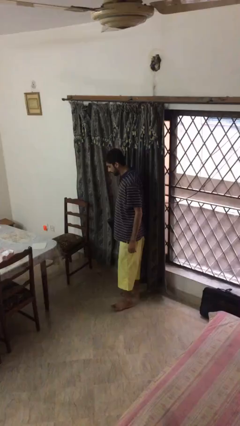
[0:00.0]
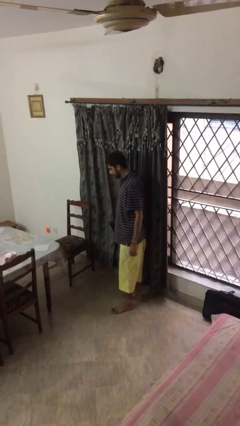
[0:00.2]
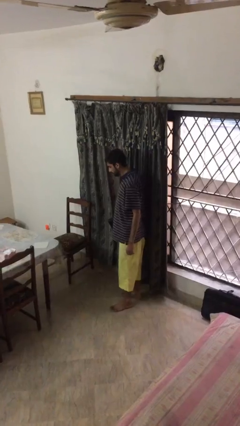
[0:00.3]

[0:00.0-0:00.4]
person sits down

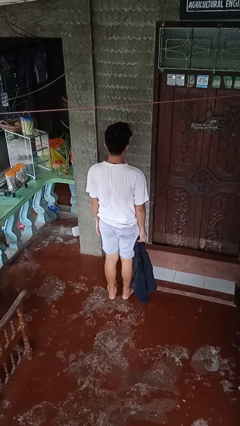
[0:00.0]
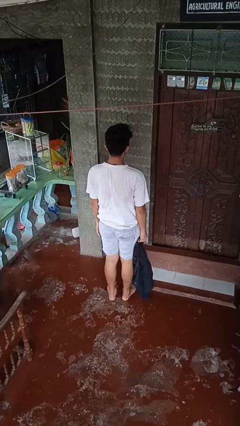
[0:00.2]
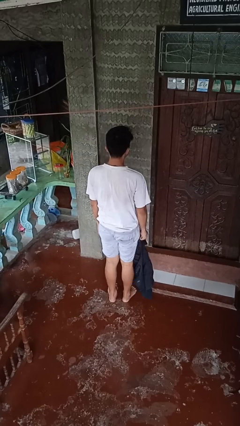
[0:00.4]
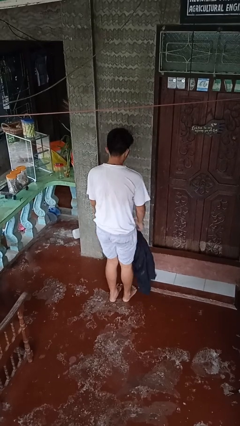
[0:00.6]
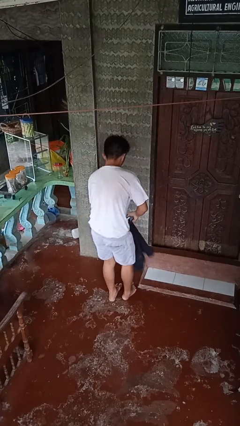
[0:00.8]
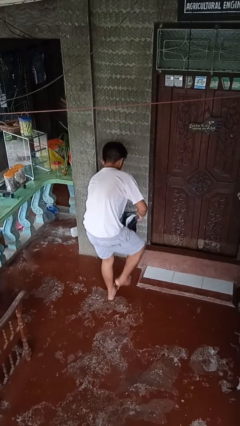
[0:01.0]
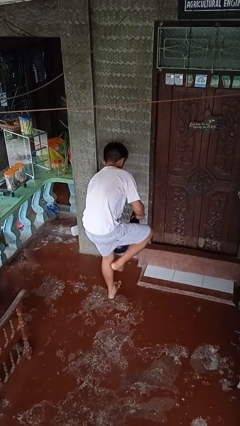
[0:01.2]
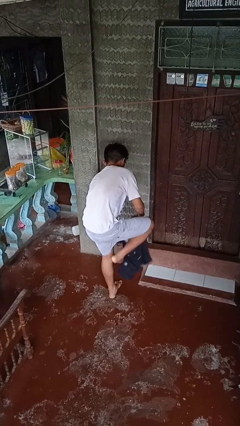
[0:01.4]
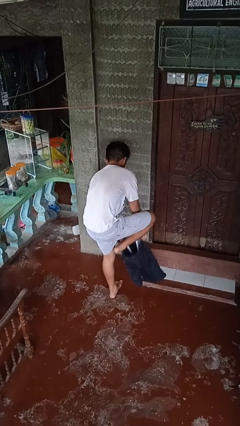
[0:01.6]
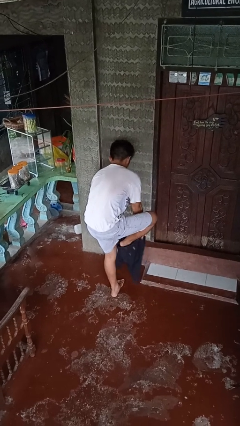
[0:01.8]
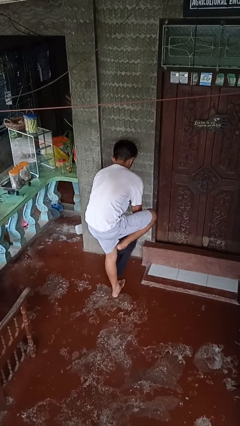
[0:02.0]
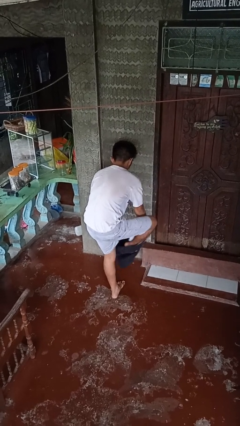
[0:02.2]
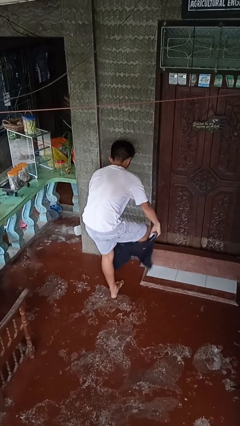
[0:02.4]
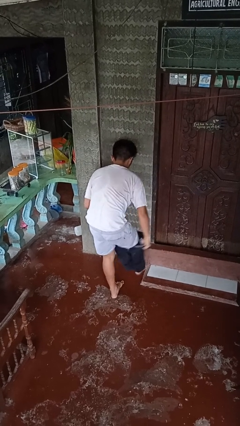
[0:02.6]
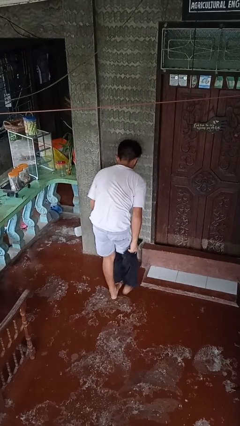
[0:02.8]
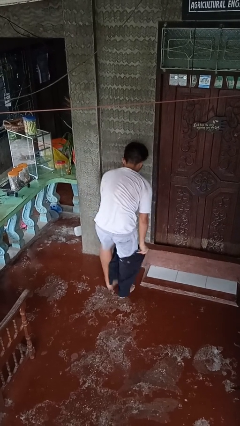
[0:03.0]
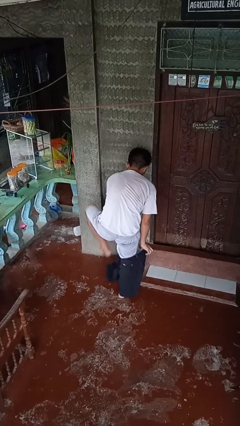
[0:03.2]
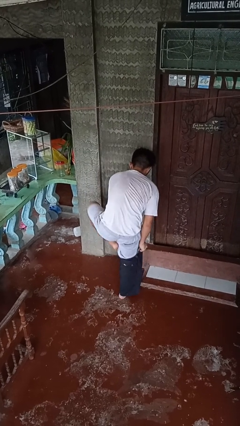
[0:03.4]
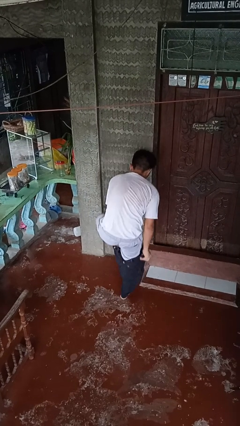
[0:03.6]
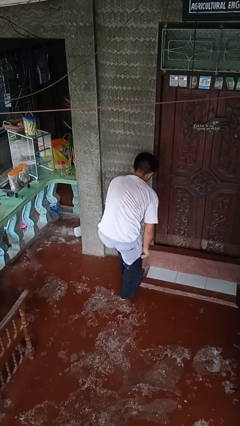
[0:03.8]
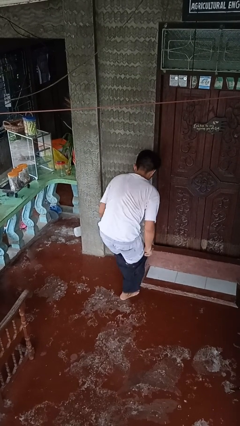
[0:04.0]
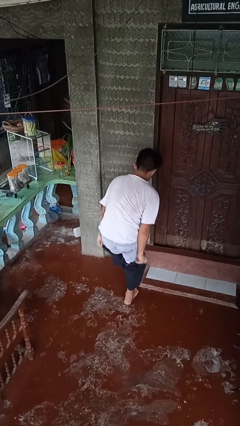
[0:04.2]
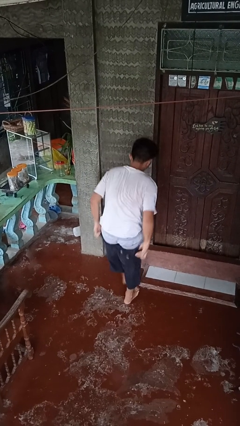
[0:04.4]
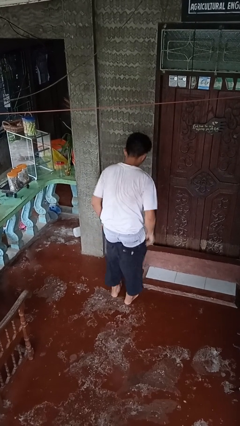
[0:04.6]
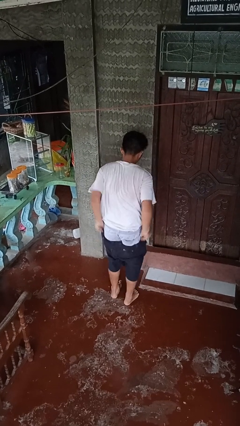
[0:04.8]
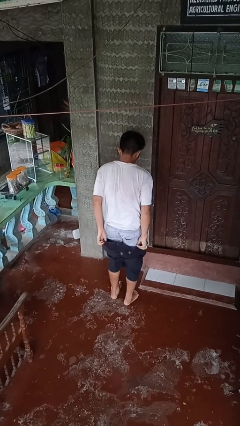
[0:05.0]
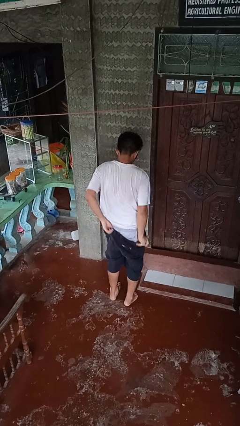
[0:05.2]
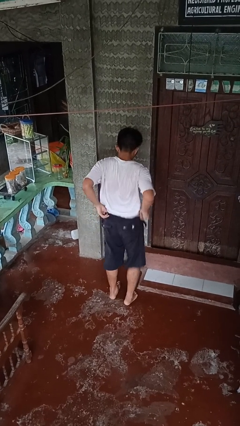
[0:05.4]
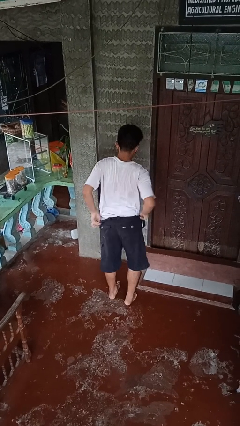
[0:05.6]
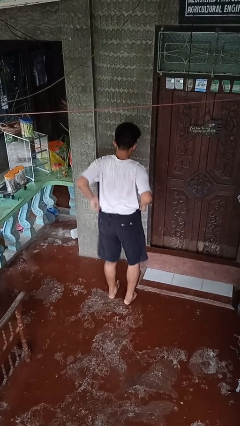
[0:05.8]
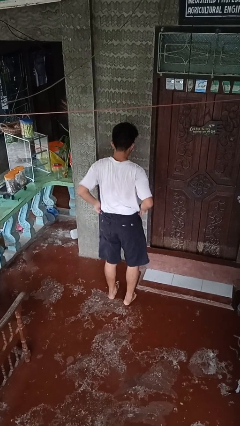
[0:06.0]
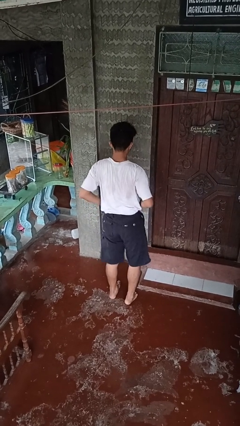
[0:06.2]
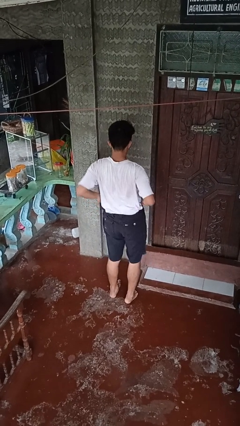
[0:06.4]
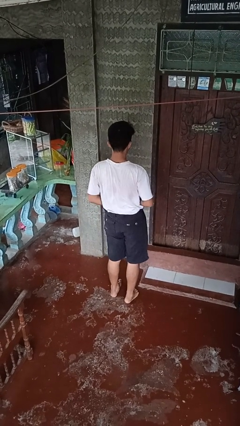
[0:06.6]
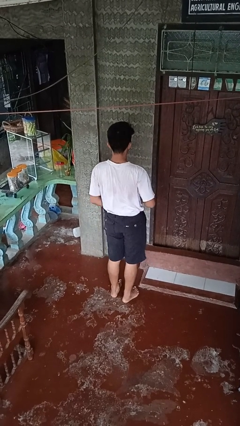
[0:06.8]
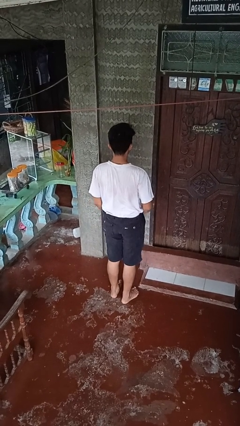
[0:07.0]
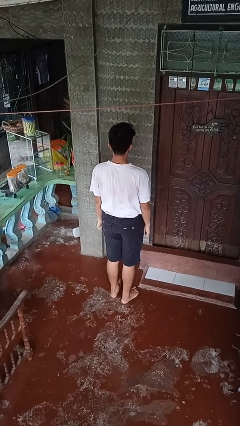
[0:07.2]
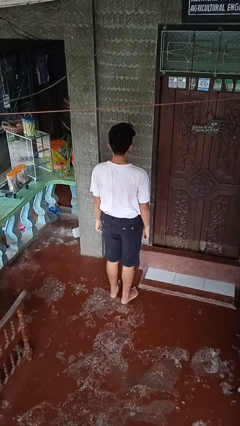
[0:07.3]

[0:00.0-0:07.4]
person puts on pants

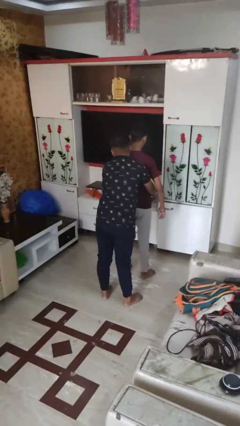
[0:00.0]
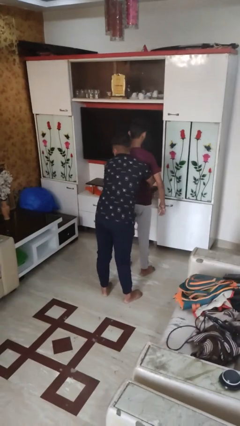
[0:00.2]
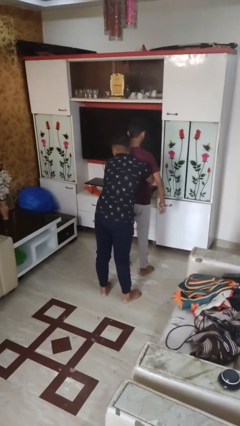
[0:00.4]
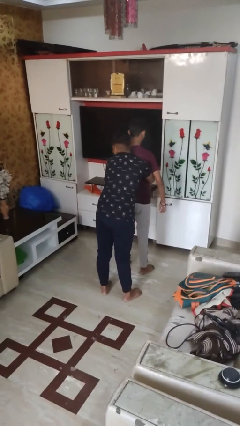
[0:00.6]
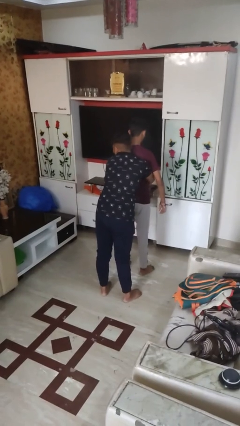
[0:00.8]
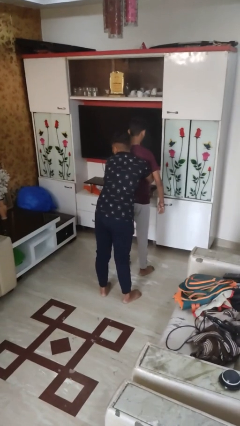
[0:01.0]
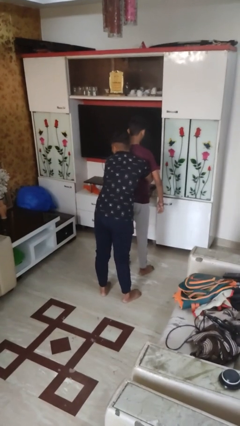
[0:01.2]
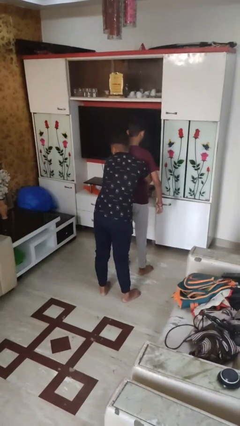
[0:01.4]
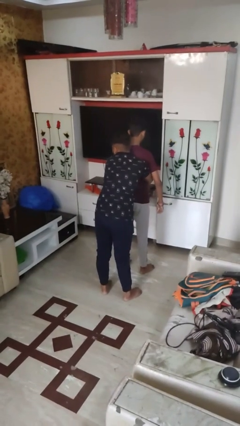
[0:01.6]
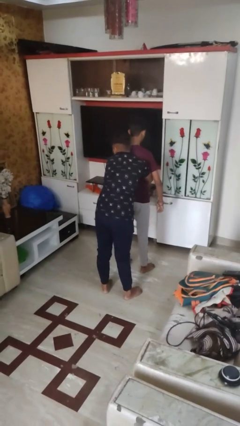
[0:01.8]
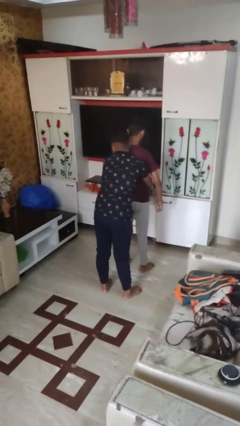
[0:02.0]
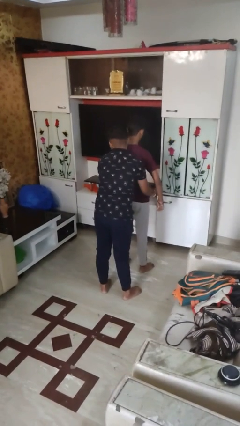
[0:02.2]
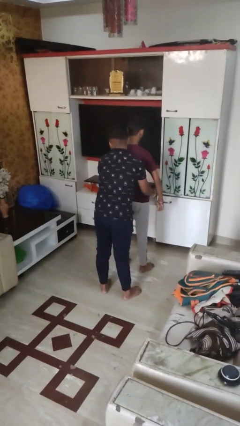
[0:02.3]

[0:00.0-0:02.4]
person hugs person from behind

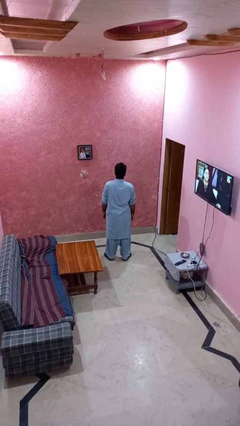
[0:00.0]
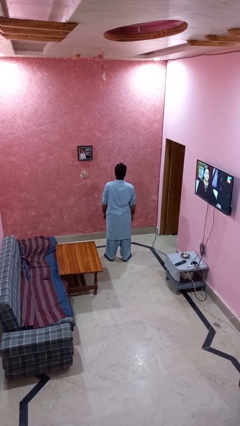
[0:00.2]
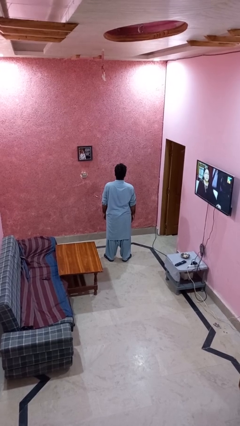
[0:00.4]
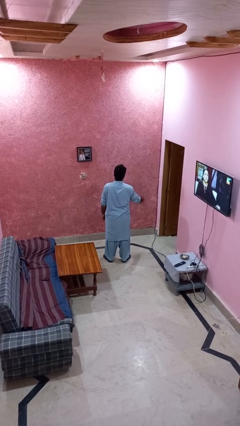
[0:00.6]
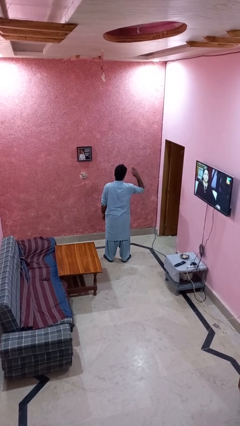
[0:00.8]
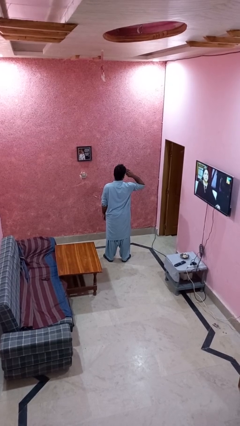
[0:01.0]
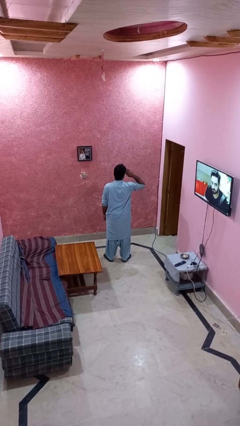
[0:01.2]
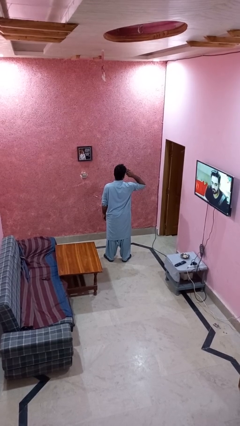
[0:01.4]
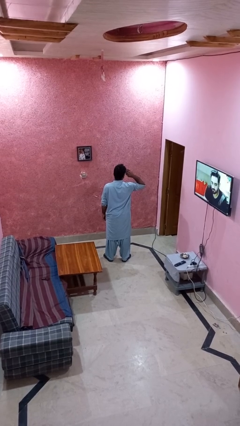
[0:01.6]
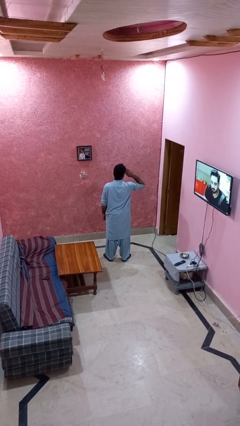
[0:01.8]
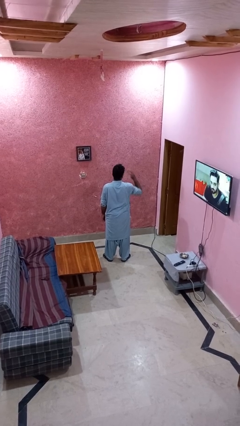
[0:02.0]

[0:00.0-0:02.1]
person salutes

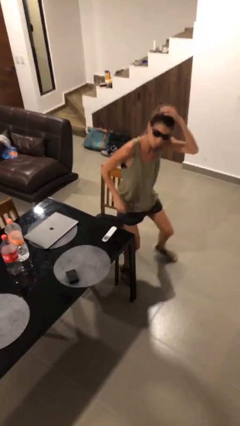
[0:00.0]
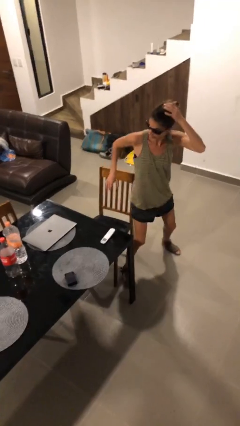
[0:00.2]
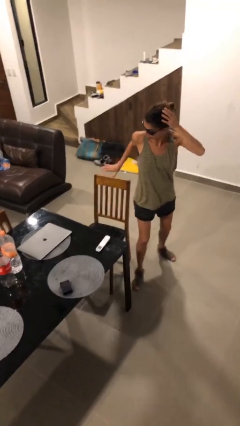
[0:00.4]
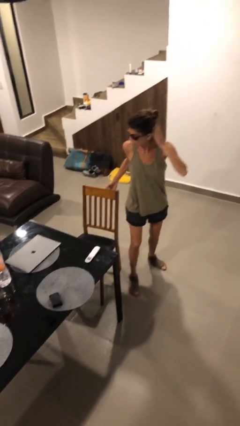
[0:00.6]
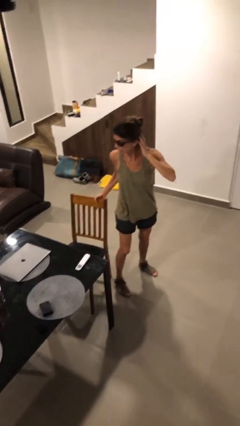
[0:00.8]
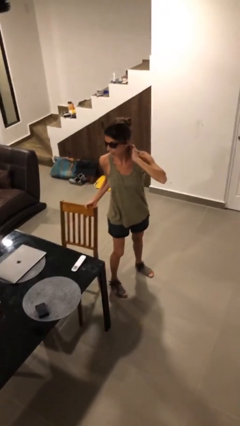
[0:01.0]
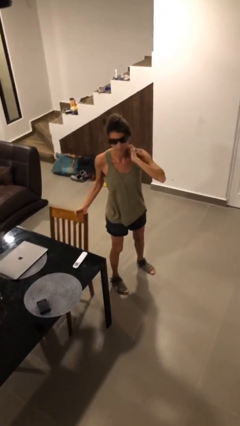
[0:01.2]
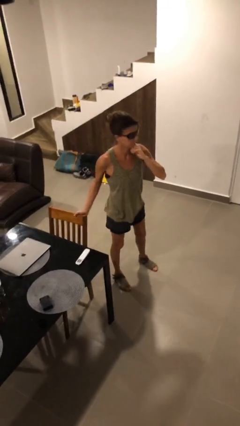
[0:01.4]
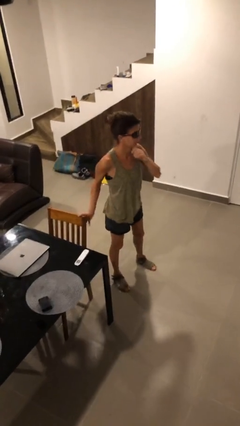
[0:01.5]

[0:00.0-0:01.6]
person stands up

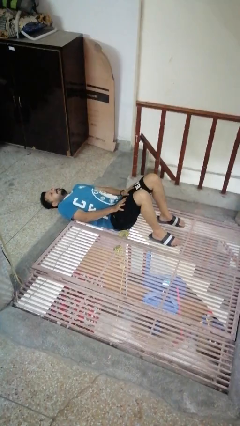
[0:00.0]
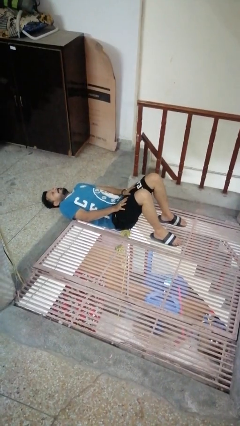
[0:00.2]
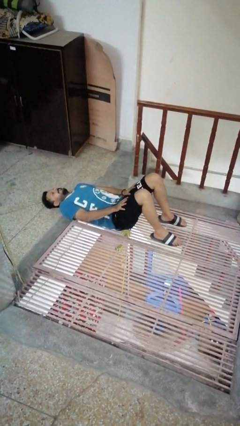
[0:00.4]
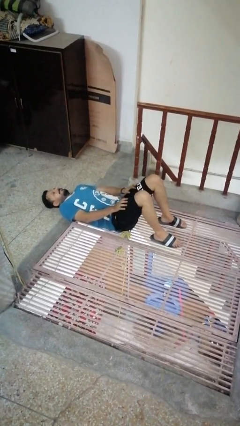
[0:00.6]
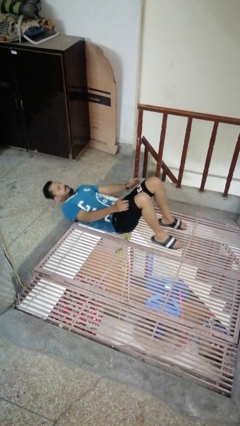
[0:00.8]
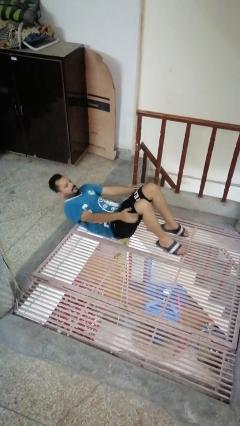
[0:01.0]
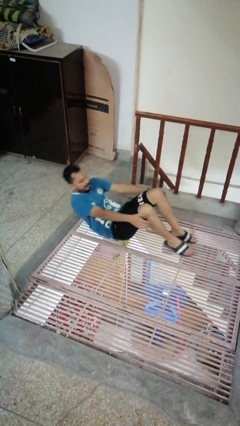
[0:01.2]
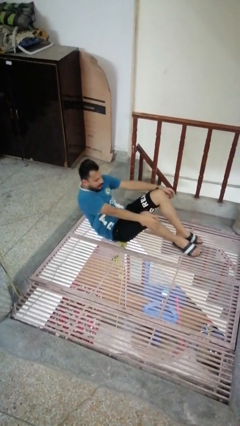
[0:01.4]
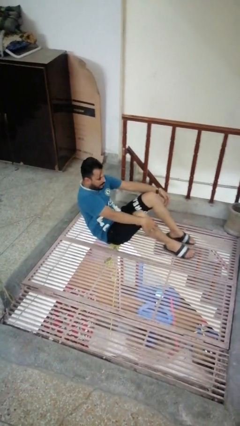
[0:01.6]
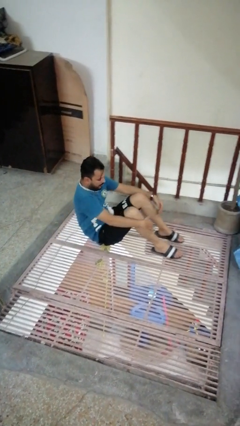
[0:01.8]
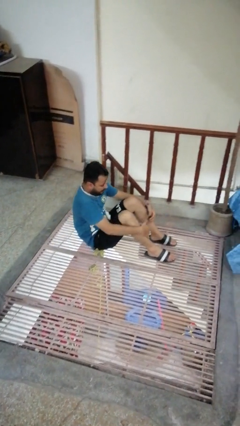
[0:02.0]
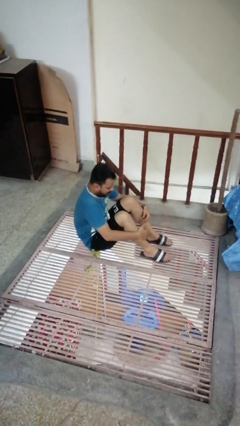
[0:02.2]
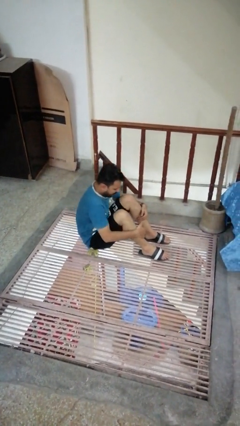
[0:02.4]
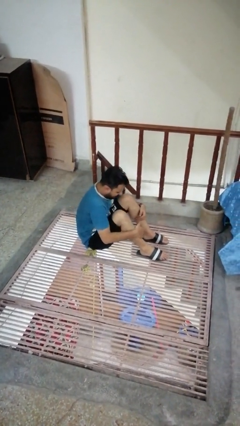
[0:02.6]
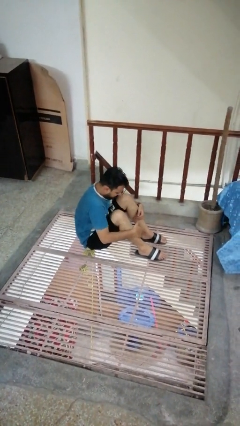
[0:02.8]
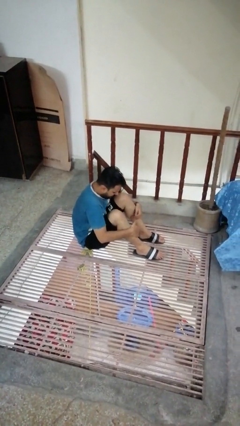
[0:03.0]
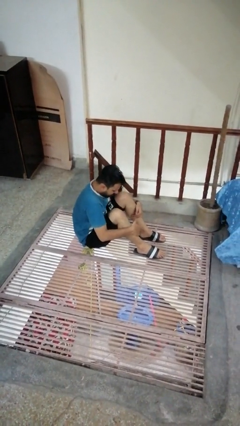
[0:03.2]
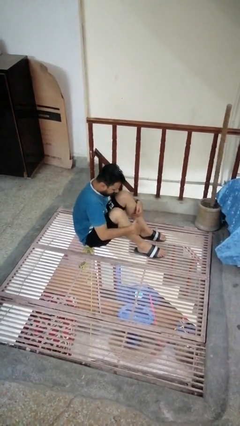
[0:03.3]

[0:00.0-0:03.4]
person exercises with situp

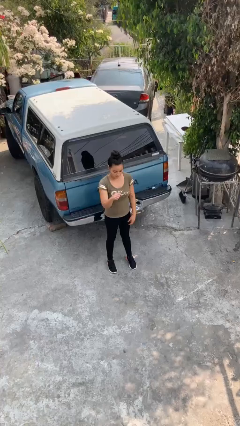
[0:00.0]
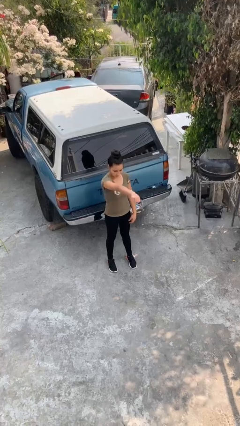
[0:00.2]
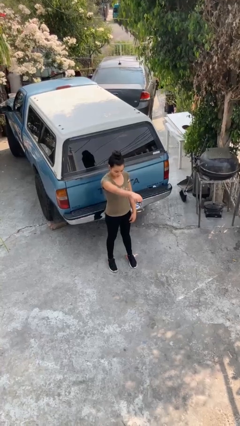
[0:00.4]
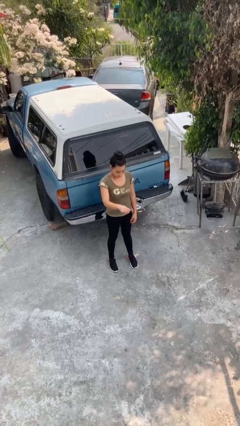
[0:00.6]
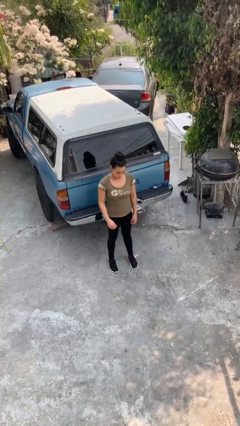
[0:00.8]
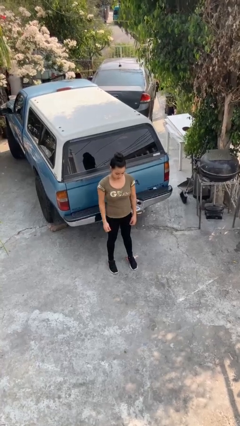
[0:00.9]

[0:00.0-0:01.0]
person punches
